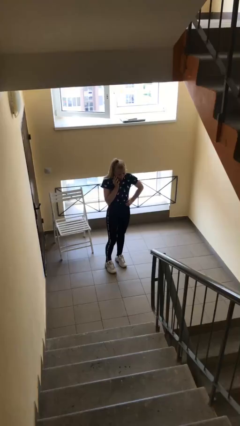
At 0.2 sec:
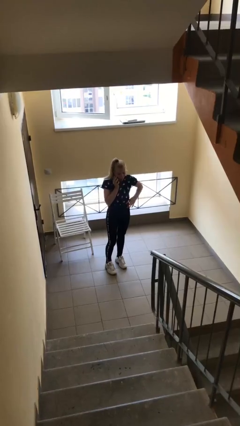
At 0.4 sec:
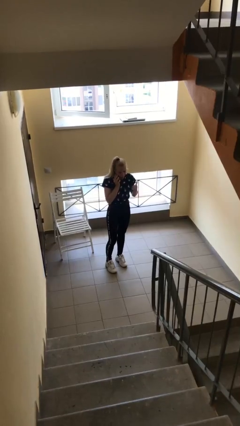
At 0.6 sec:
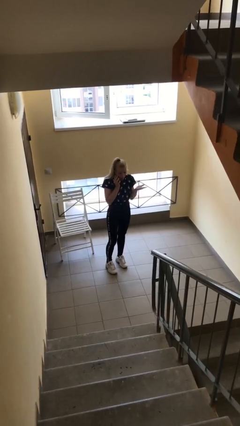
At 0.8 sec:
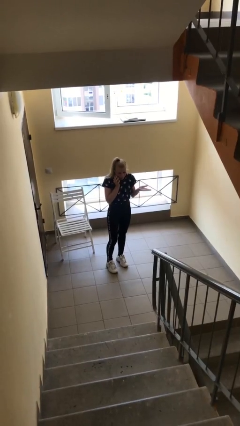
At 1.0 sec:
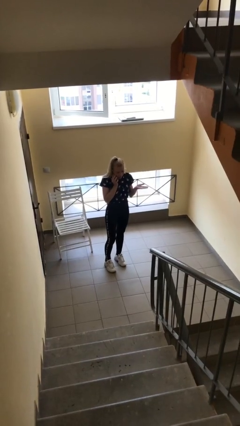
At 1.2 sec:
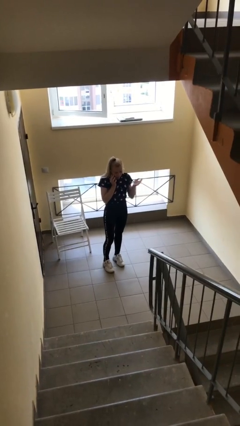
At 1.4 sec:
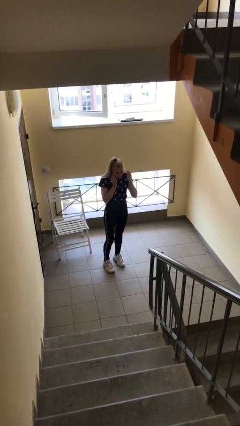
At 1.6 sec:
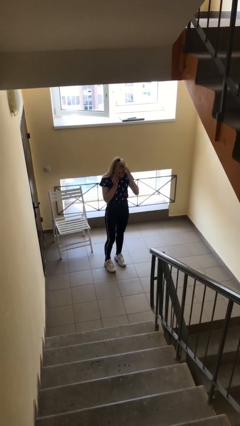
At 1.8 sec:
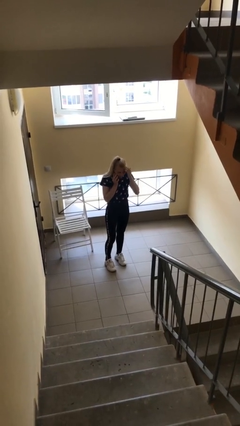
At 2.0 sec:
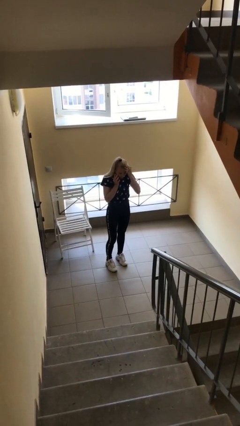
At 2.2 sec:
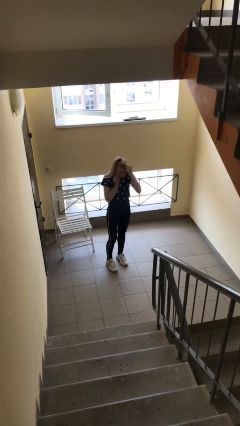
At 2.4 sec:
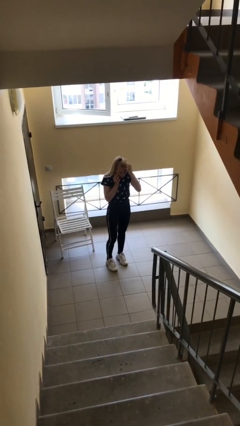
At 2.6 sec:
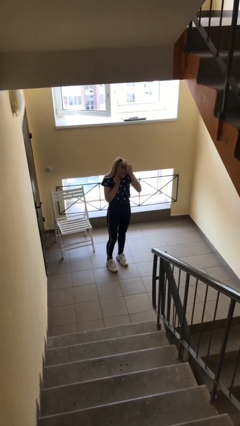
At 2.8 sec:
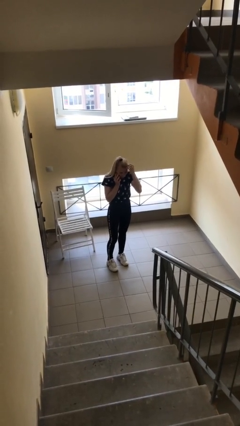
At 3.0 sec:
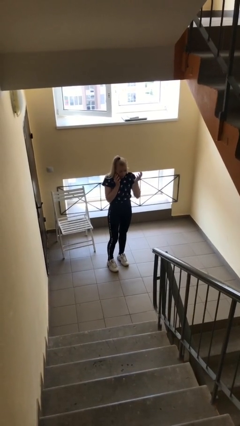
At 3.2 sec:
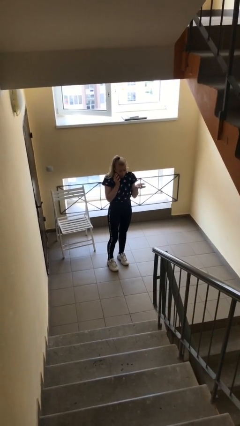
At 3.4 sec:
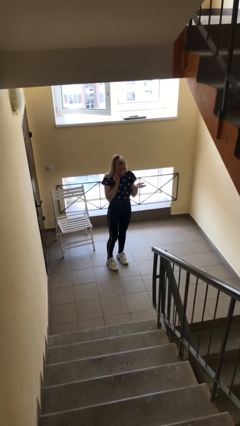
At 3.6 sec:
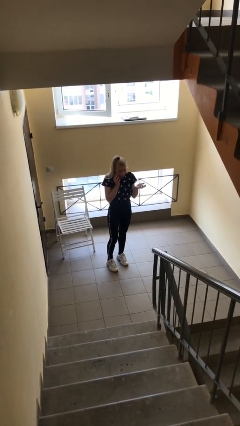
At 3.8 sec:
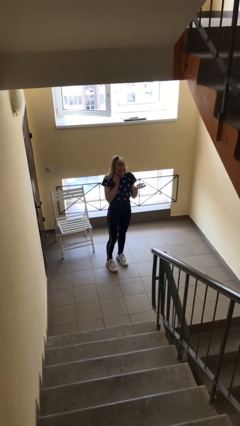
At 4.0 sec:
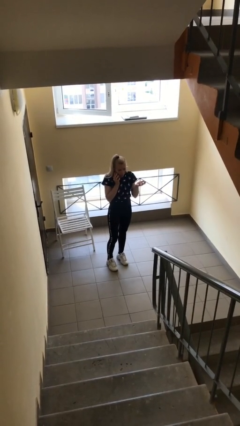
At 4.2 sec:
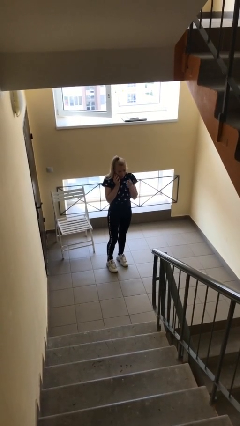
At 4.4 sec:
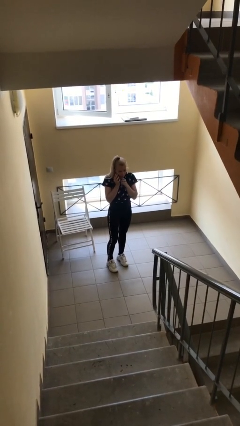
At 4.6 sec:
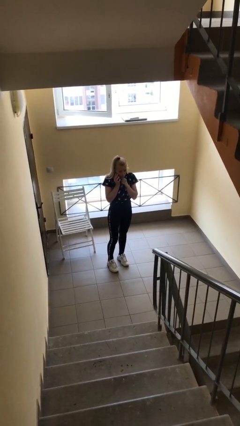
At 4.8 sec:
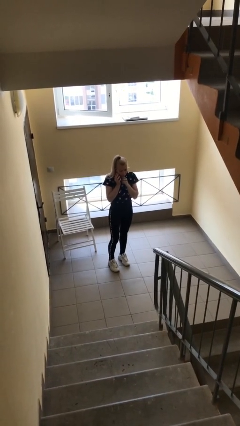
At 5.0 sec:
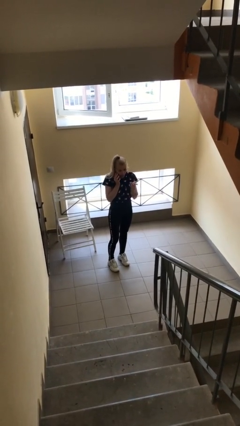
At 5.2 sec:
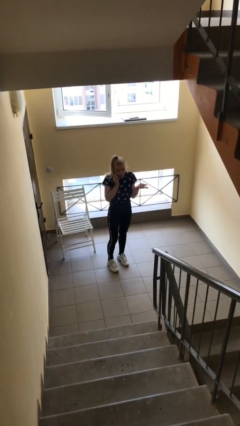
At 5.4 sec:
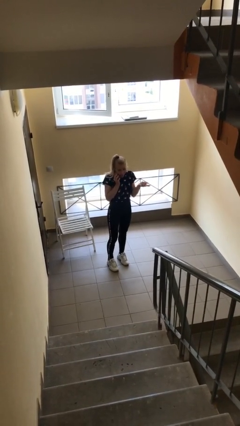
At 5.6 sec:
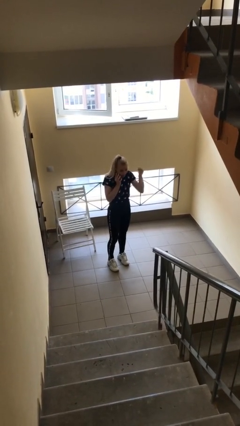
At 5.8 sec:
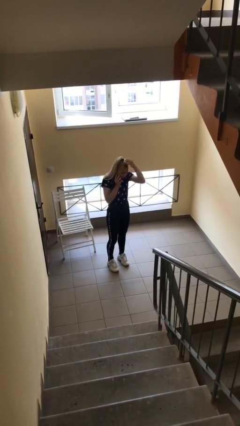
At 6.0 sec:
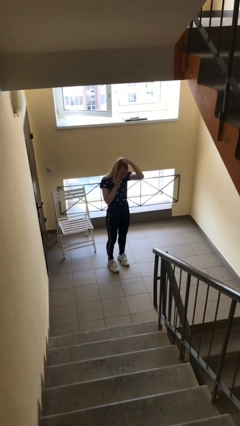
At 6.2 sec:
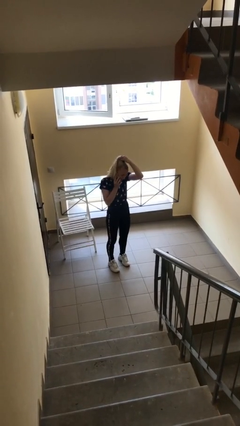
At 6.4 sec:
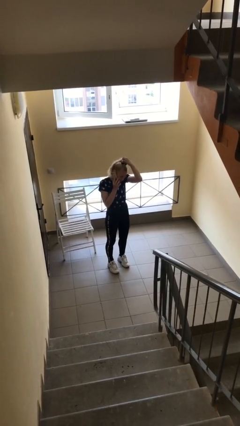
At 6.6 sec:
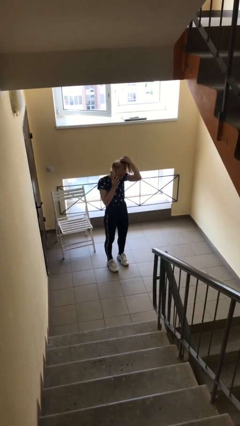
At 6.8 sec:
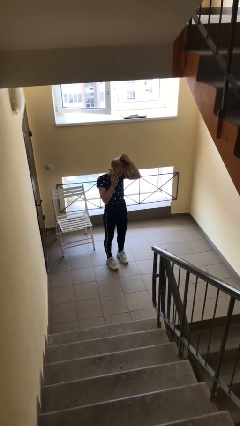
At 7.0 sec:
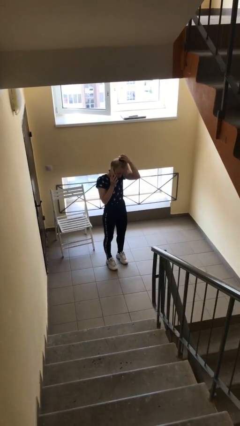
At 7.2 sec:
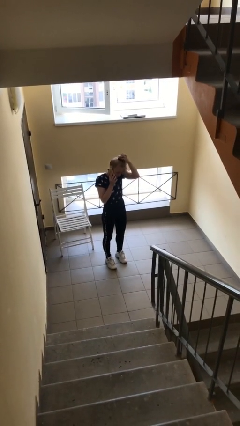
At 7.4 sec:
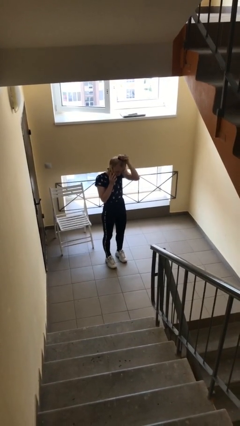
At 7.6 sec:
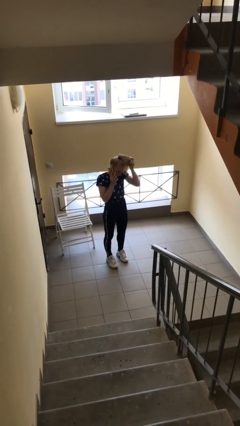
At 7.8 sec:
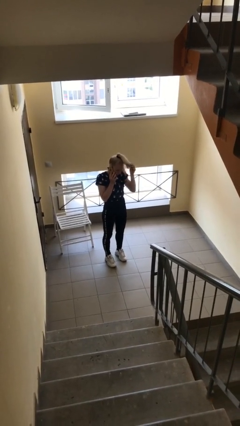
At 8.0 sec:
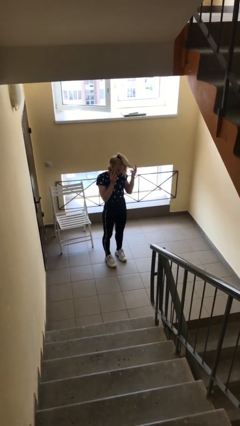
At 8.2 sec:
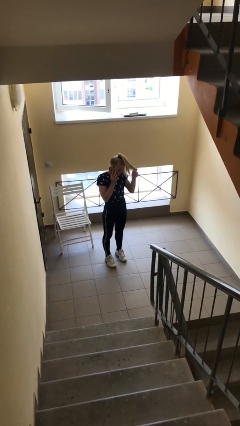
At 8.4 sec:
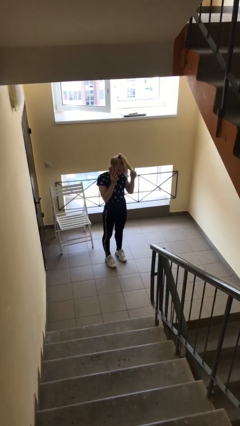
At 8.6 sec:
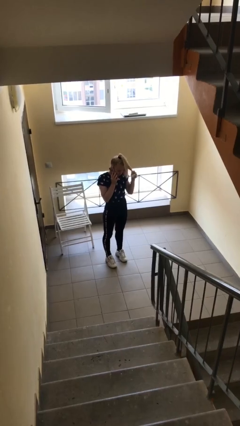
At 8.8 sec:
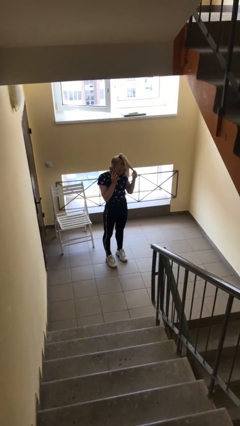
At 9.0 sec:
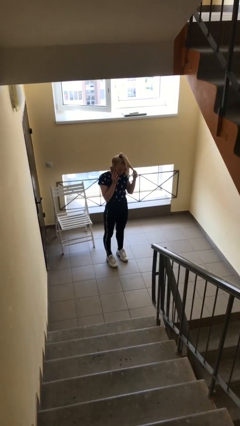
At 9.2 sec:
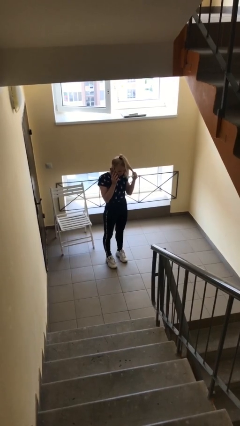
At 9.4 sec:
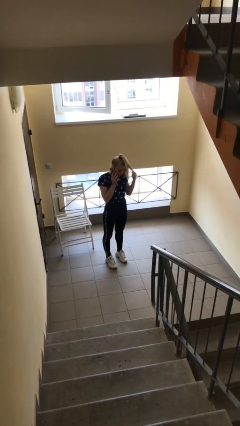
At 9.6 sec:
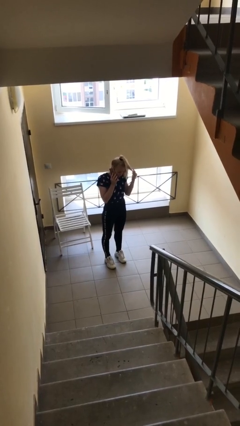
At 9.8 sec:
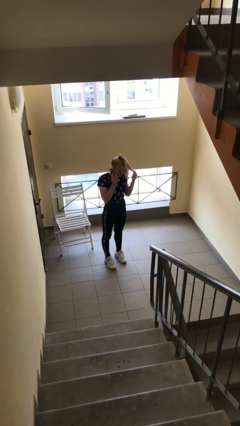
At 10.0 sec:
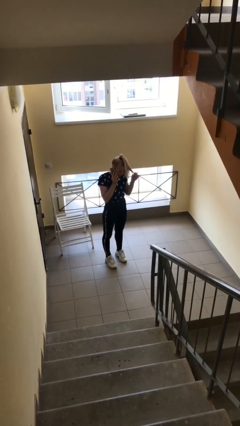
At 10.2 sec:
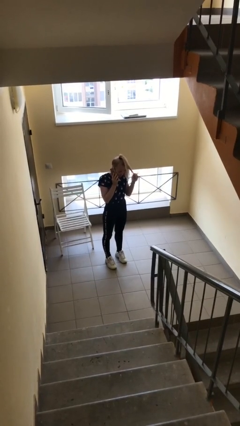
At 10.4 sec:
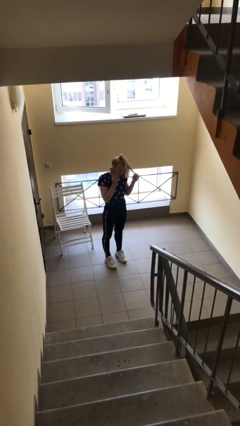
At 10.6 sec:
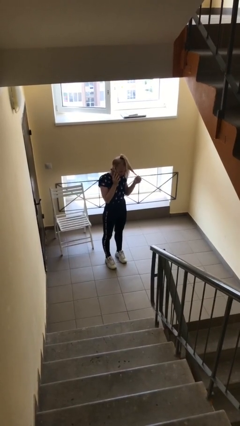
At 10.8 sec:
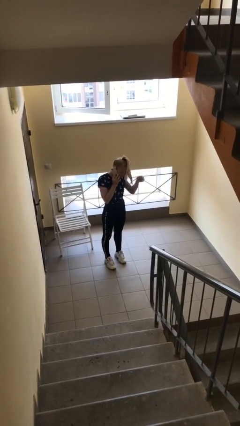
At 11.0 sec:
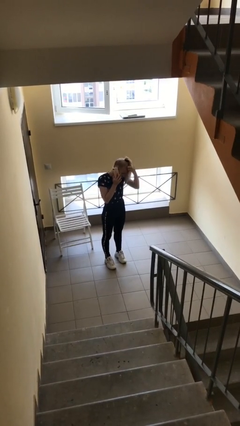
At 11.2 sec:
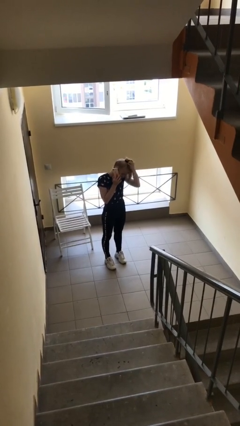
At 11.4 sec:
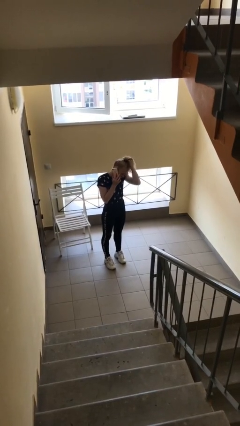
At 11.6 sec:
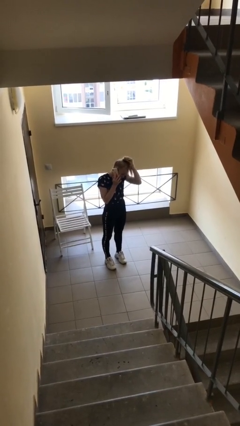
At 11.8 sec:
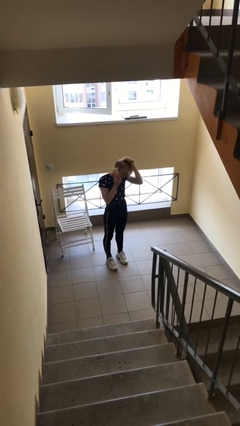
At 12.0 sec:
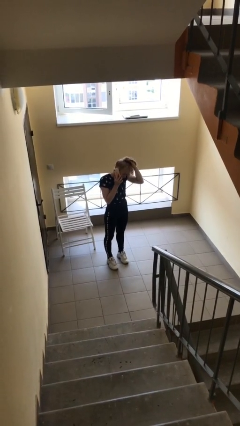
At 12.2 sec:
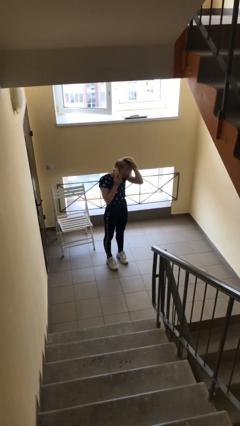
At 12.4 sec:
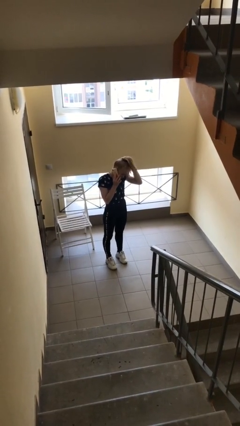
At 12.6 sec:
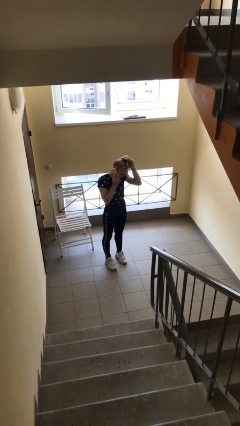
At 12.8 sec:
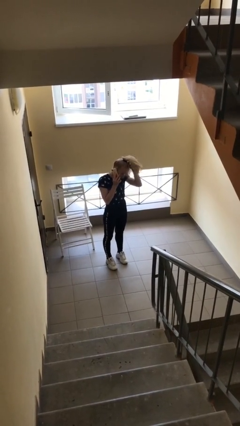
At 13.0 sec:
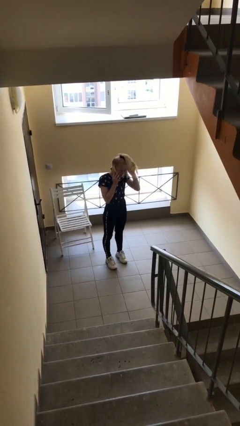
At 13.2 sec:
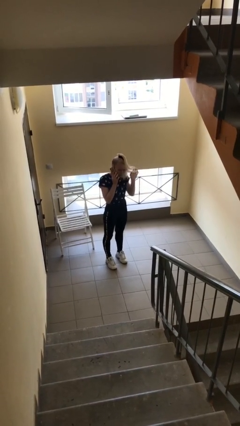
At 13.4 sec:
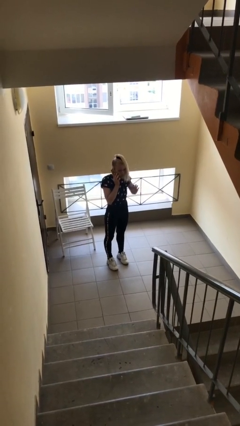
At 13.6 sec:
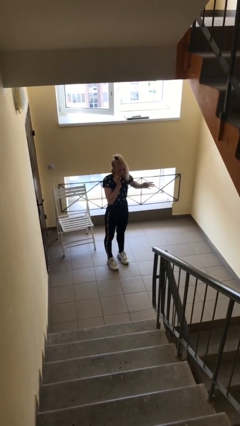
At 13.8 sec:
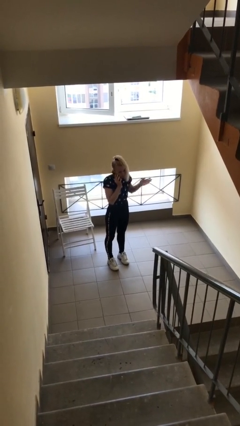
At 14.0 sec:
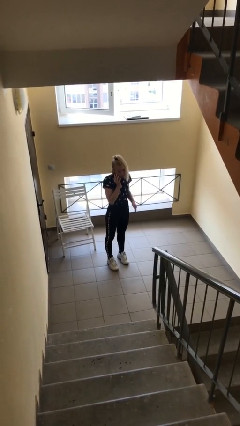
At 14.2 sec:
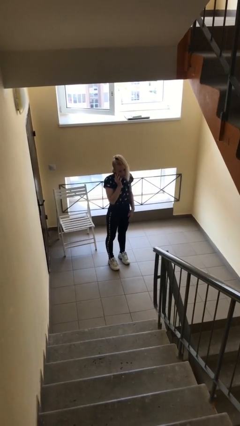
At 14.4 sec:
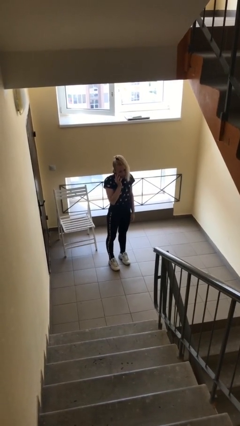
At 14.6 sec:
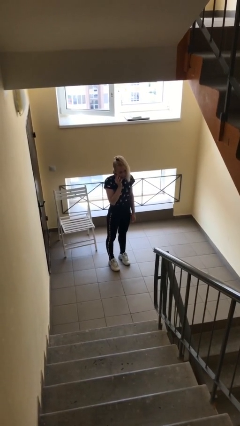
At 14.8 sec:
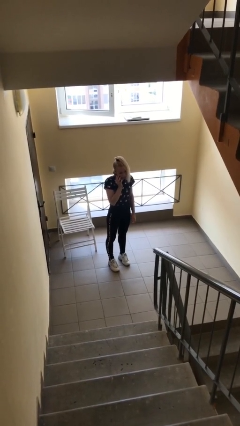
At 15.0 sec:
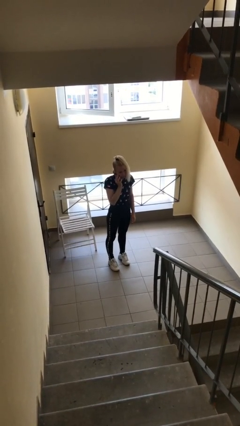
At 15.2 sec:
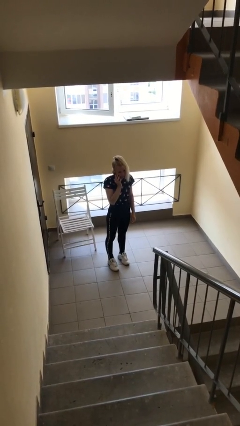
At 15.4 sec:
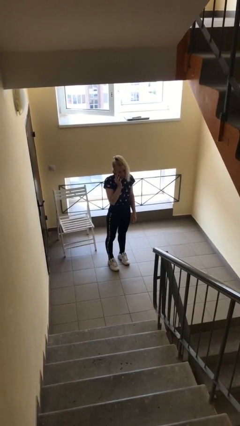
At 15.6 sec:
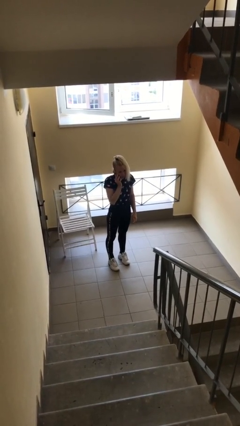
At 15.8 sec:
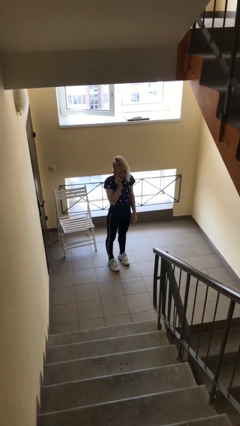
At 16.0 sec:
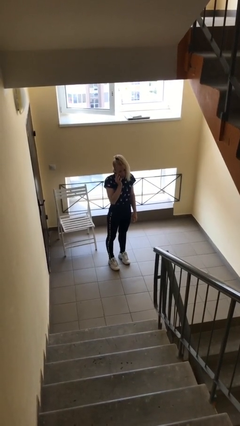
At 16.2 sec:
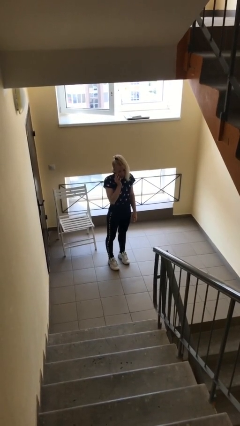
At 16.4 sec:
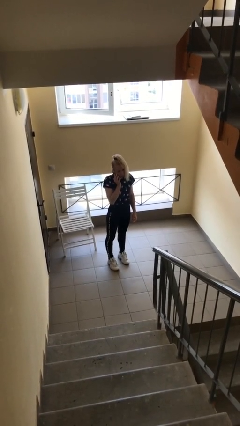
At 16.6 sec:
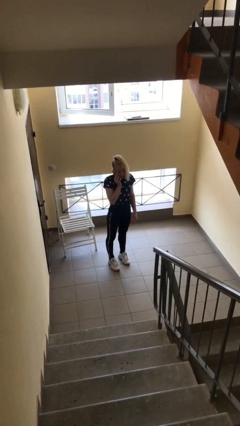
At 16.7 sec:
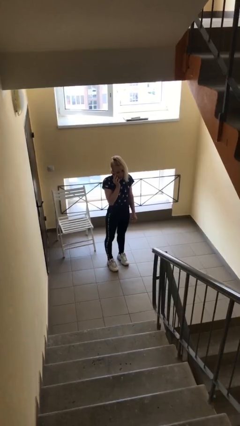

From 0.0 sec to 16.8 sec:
person talks on phone

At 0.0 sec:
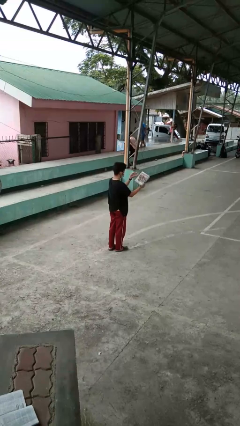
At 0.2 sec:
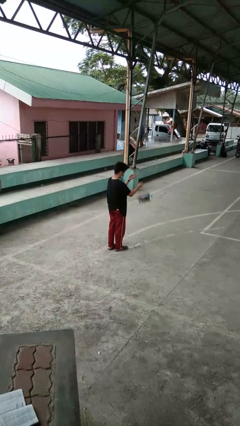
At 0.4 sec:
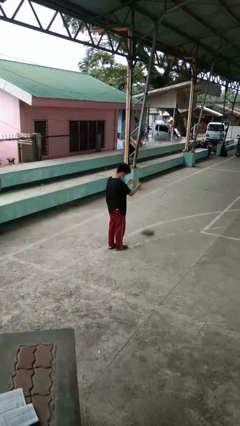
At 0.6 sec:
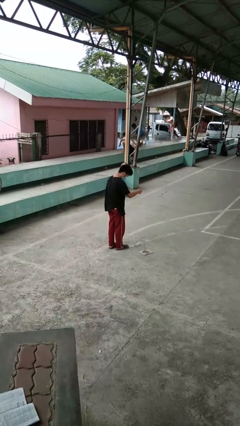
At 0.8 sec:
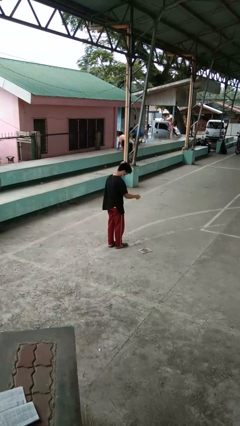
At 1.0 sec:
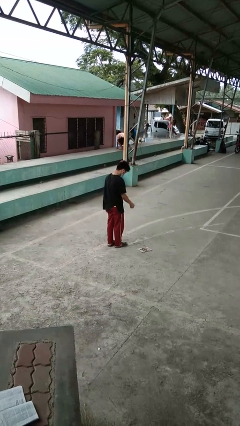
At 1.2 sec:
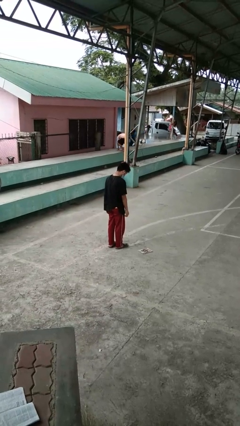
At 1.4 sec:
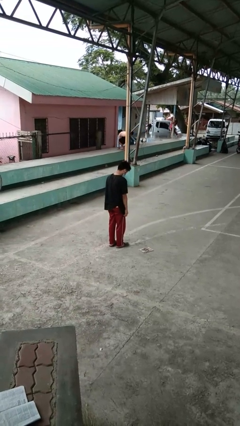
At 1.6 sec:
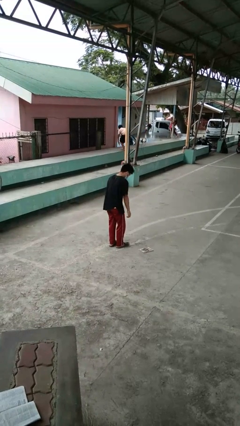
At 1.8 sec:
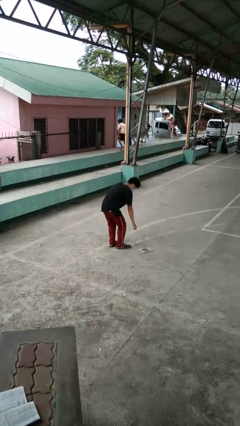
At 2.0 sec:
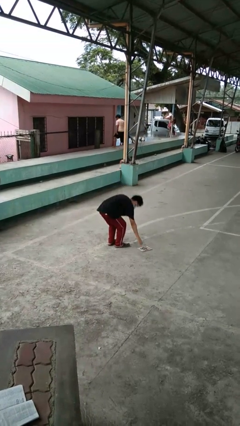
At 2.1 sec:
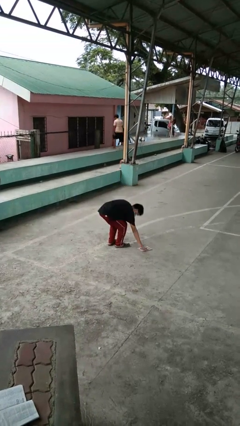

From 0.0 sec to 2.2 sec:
person drops object
